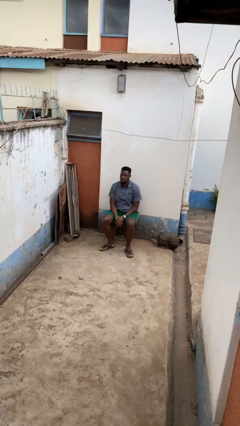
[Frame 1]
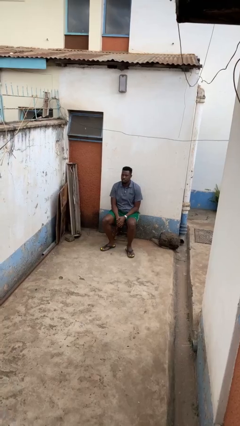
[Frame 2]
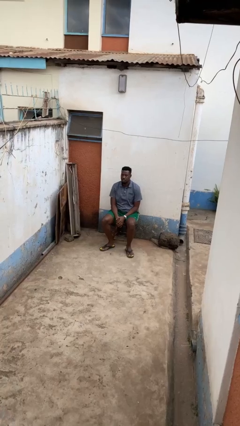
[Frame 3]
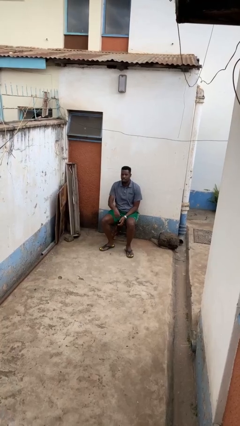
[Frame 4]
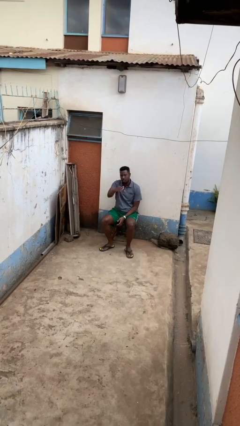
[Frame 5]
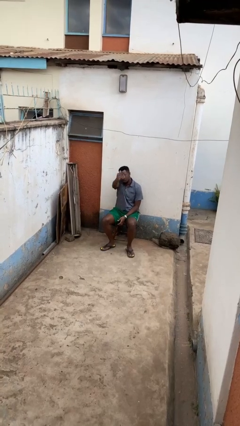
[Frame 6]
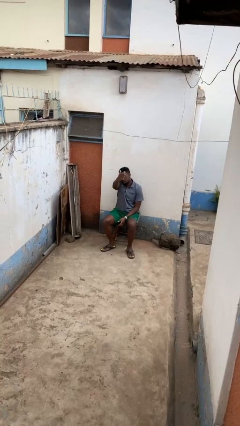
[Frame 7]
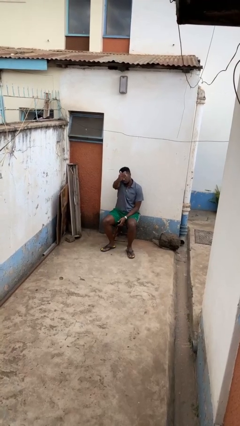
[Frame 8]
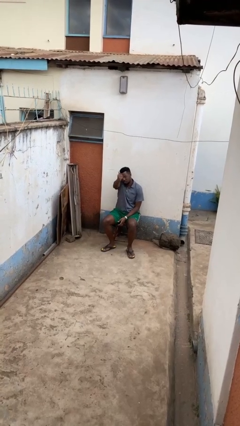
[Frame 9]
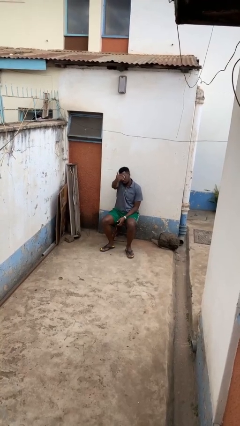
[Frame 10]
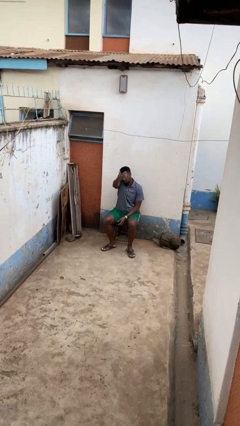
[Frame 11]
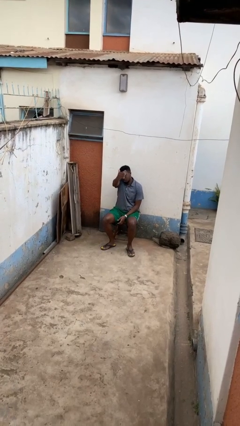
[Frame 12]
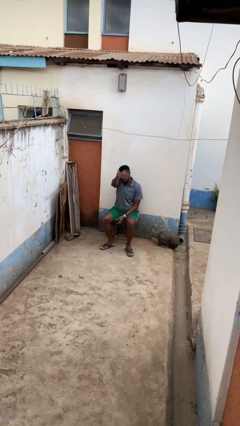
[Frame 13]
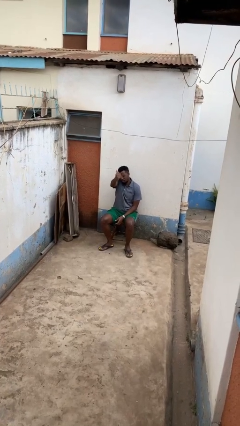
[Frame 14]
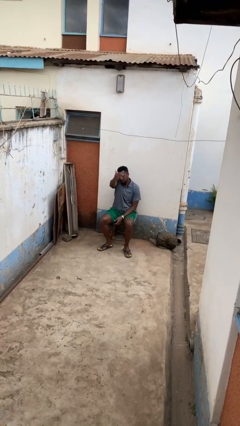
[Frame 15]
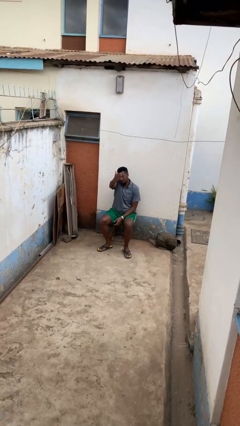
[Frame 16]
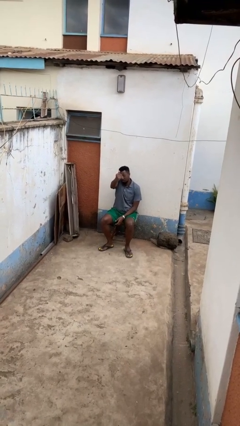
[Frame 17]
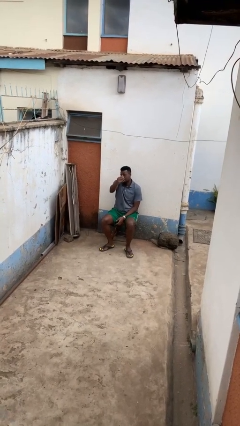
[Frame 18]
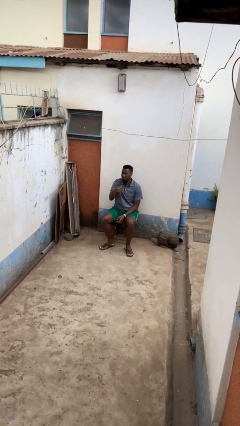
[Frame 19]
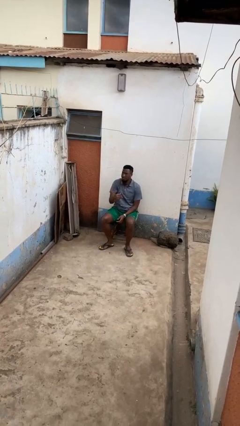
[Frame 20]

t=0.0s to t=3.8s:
person gestures come here

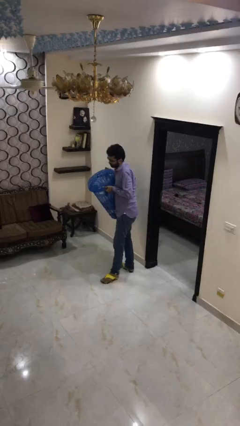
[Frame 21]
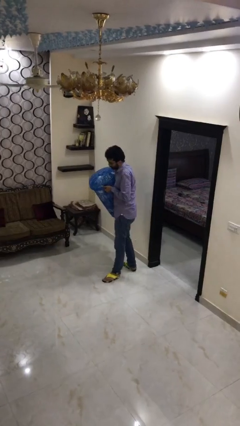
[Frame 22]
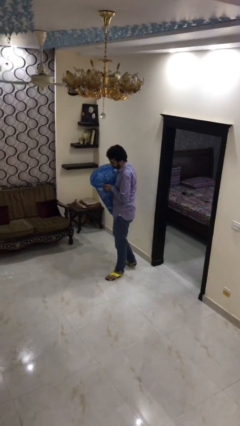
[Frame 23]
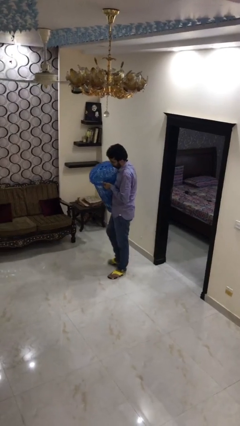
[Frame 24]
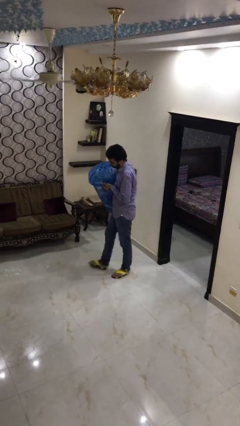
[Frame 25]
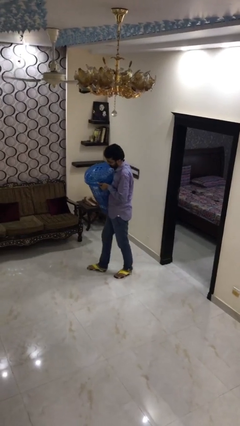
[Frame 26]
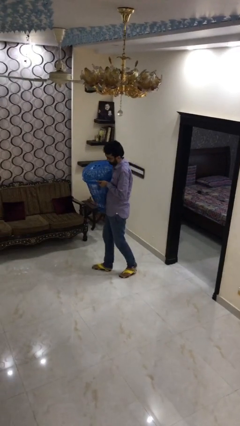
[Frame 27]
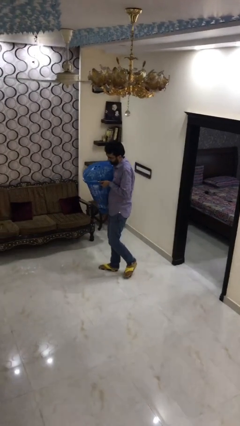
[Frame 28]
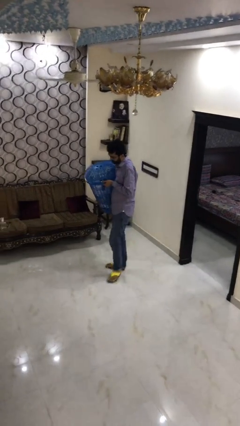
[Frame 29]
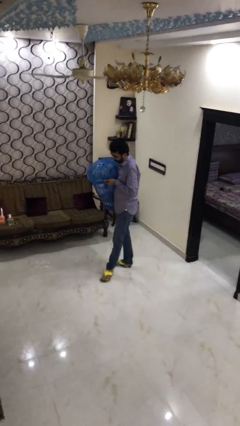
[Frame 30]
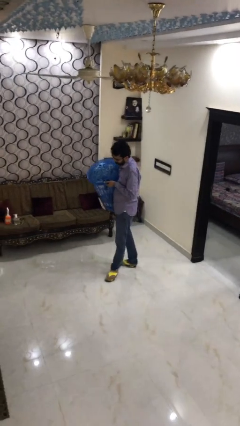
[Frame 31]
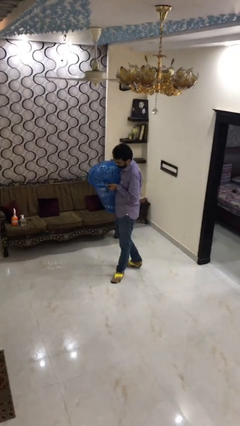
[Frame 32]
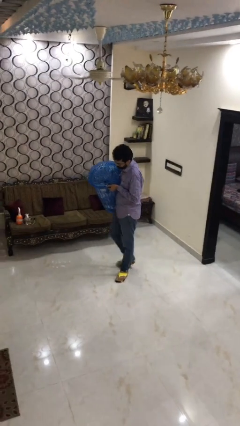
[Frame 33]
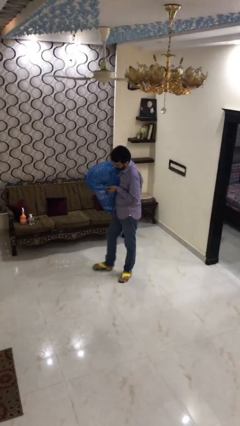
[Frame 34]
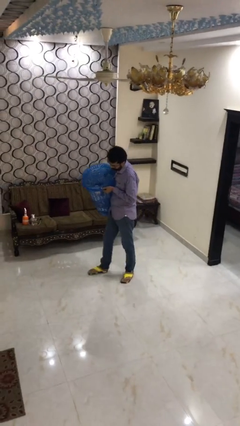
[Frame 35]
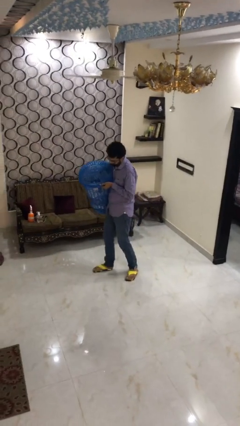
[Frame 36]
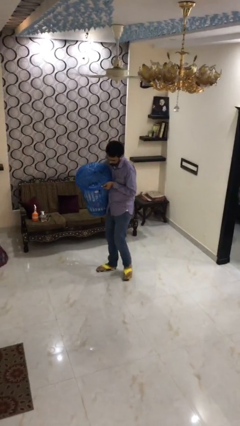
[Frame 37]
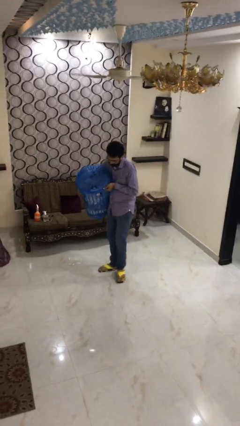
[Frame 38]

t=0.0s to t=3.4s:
person carries heavy object

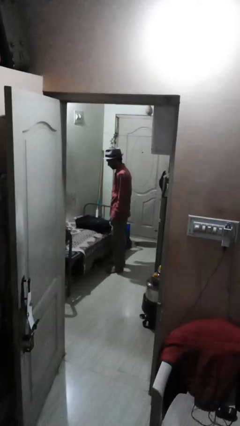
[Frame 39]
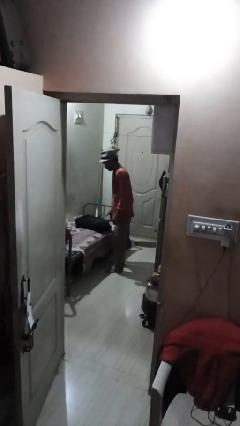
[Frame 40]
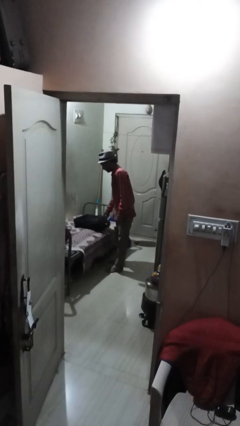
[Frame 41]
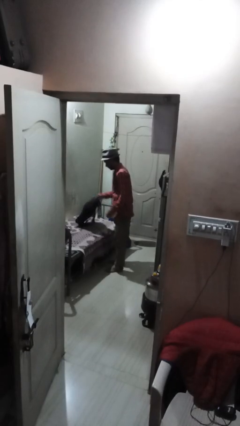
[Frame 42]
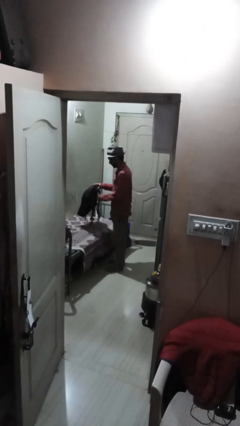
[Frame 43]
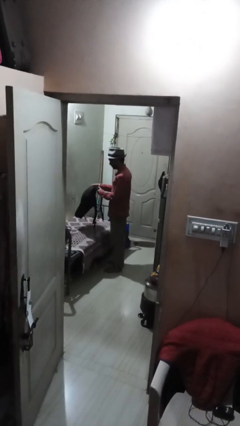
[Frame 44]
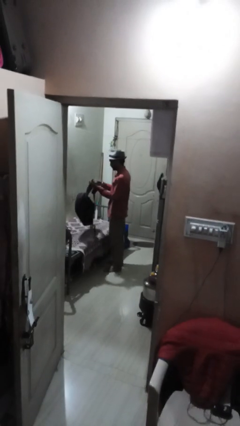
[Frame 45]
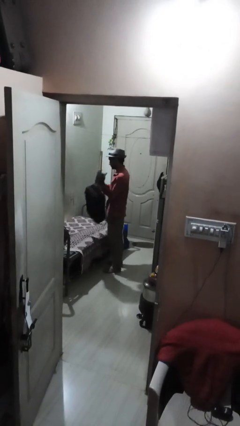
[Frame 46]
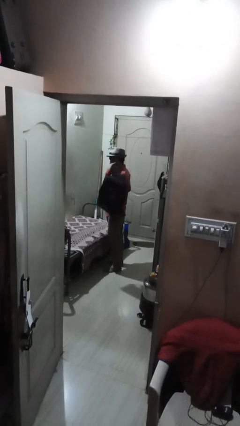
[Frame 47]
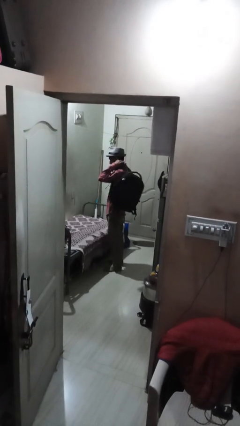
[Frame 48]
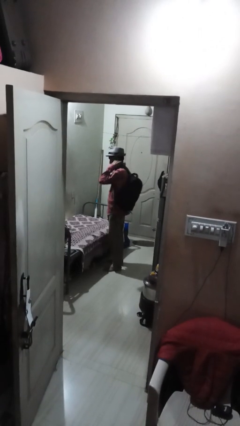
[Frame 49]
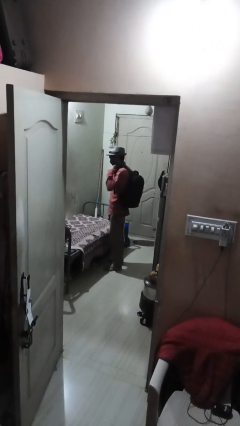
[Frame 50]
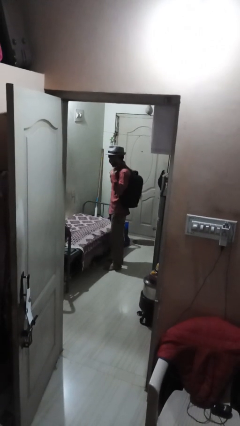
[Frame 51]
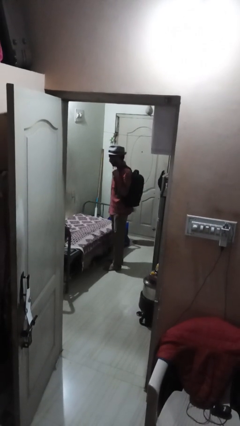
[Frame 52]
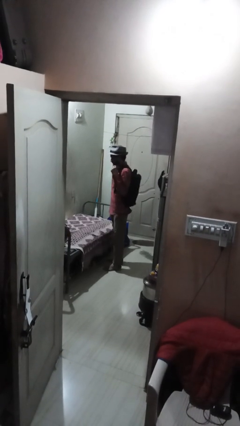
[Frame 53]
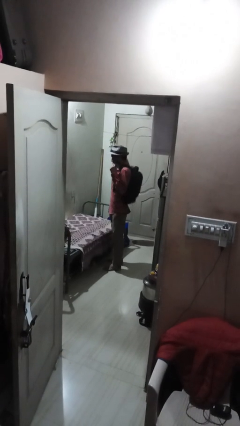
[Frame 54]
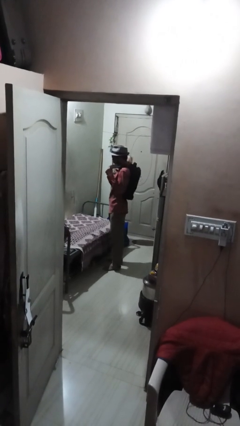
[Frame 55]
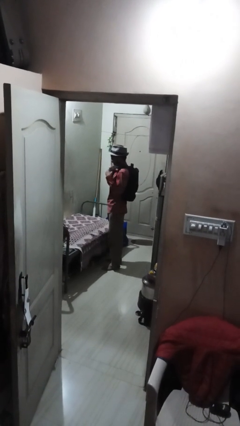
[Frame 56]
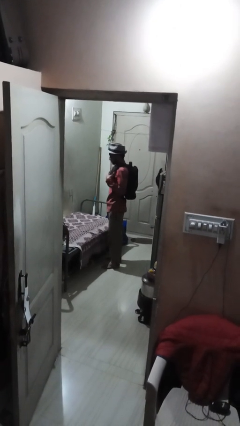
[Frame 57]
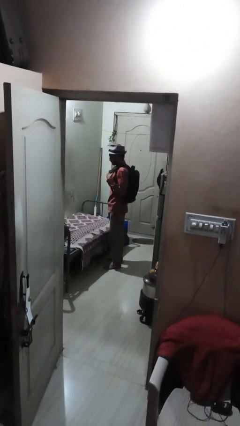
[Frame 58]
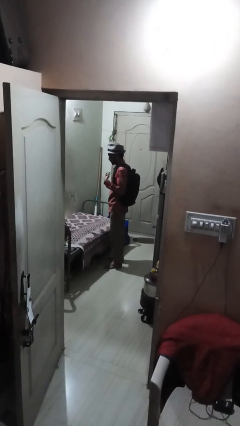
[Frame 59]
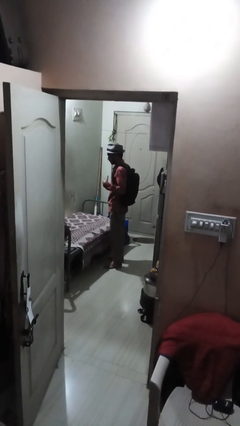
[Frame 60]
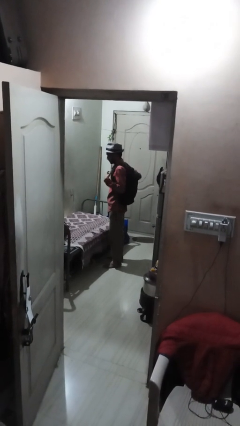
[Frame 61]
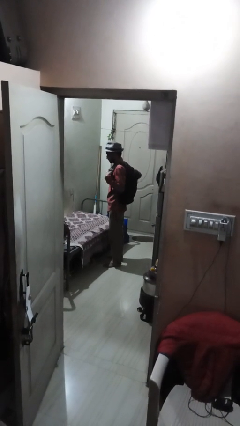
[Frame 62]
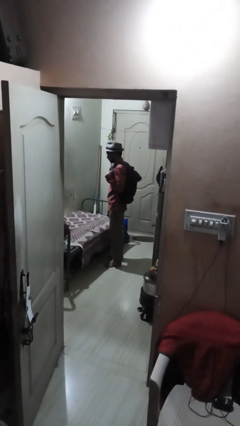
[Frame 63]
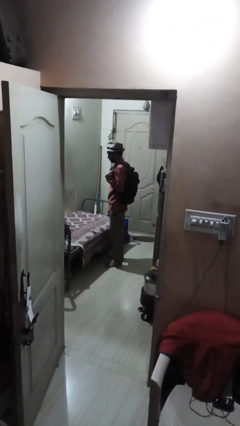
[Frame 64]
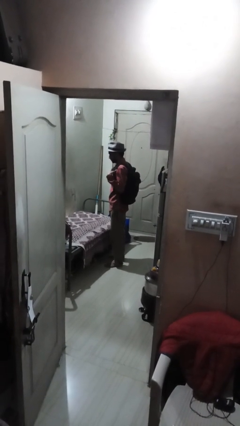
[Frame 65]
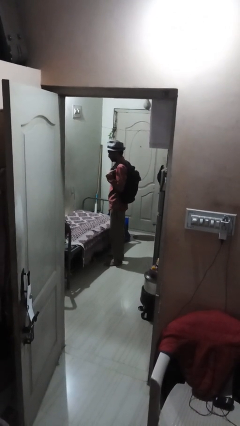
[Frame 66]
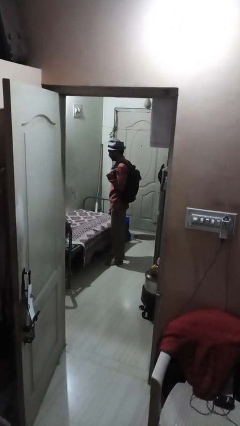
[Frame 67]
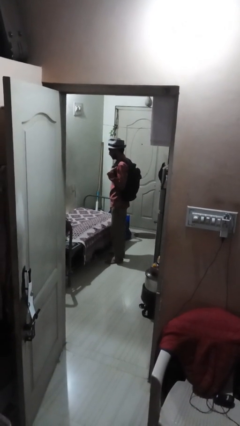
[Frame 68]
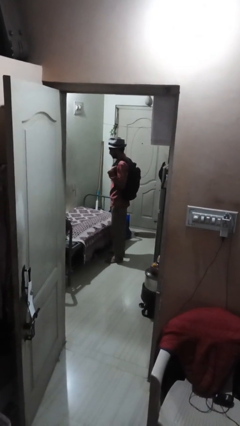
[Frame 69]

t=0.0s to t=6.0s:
person puts on backpack

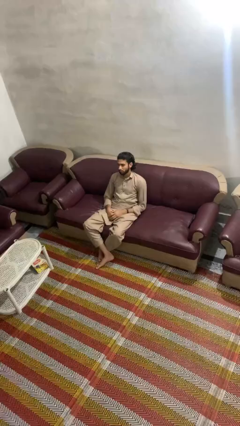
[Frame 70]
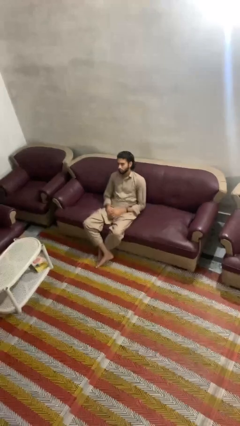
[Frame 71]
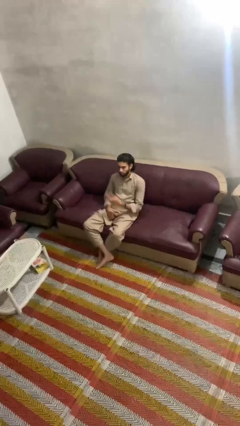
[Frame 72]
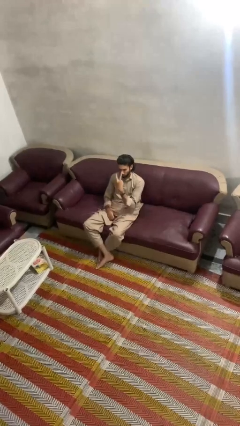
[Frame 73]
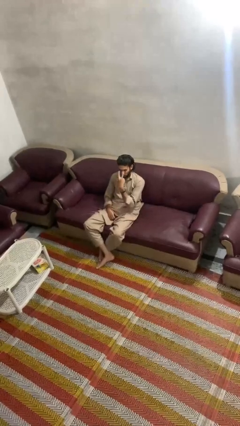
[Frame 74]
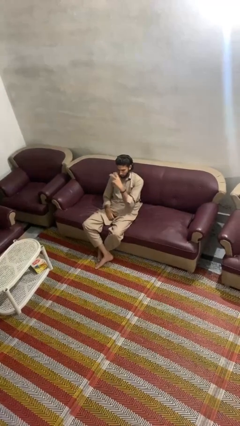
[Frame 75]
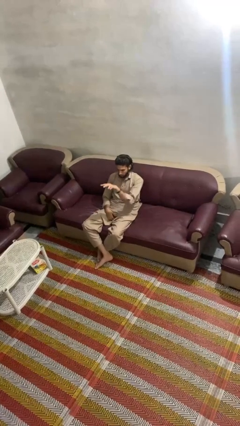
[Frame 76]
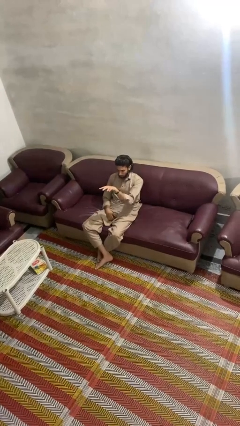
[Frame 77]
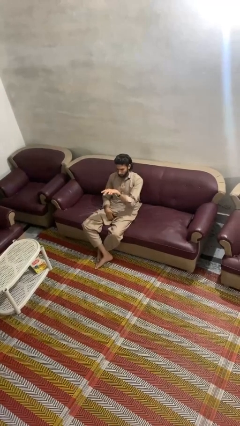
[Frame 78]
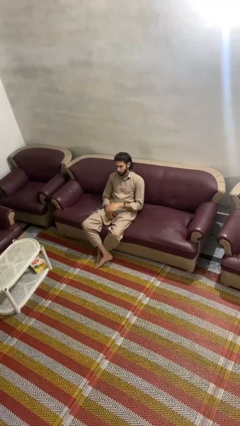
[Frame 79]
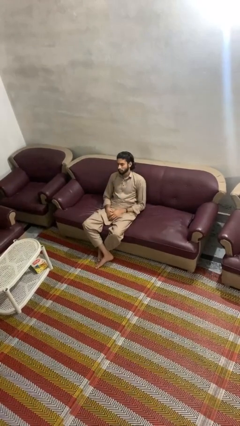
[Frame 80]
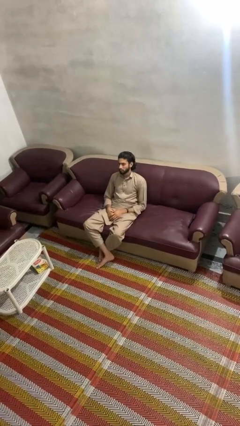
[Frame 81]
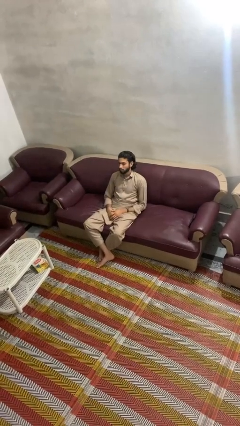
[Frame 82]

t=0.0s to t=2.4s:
person gestures watch closely

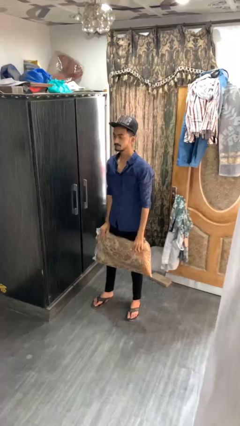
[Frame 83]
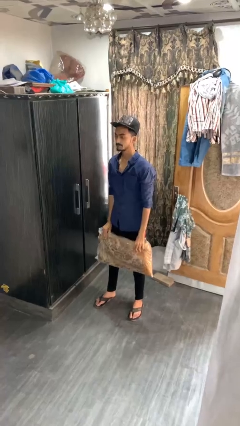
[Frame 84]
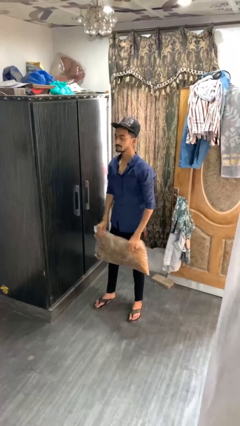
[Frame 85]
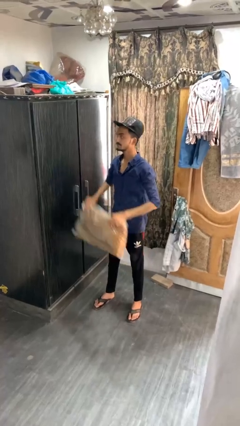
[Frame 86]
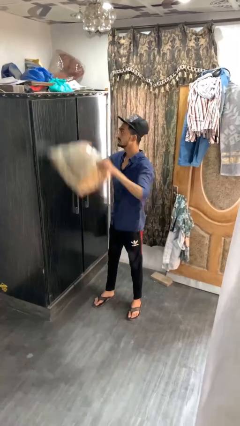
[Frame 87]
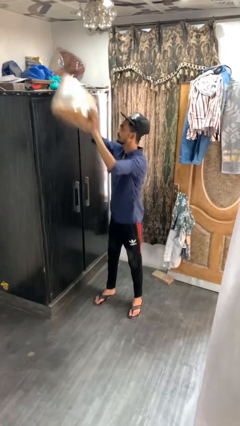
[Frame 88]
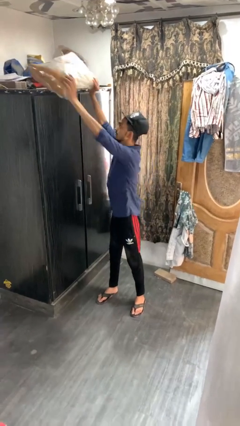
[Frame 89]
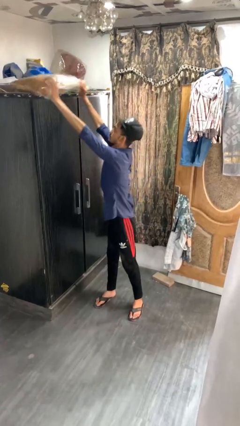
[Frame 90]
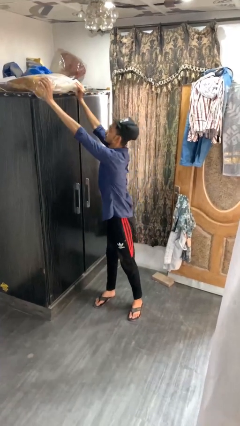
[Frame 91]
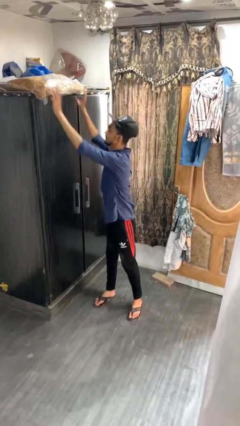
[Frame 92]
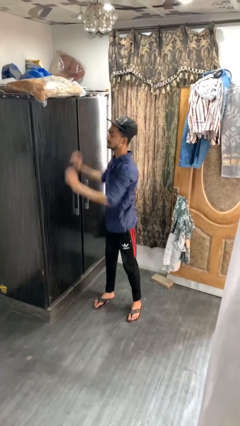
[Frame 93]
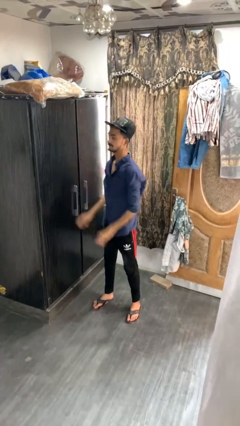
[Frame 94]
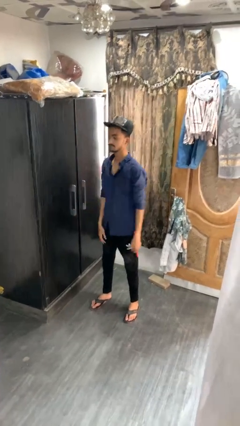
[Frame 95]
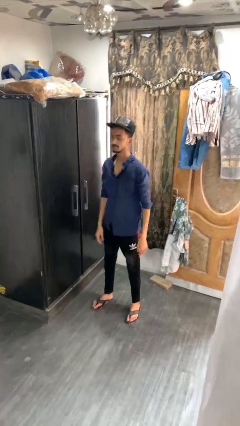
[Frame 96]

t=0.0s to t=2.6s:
person puts down object on shelf
